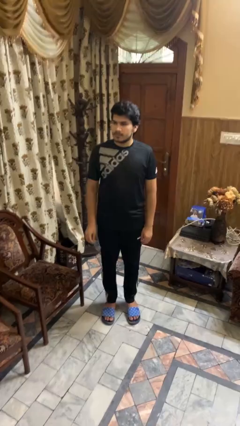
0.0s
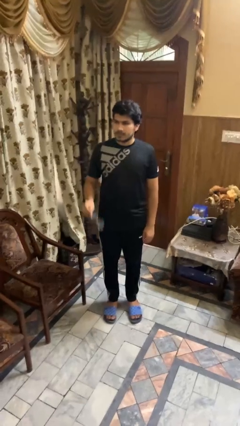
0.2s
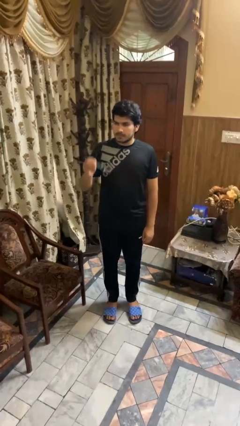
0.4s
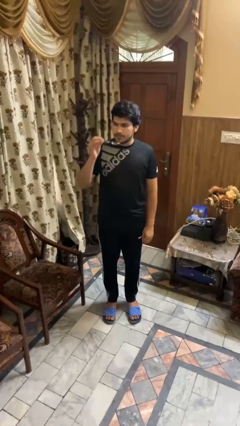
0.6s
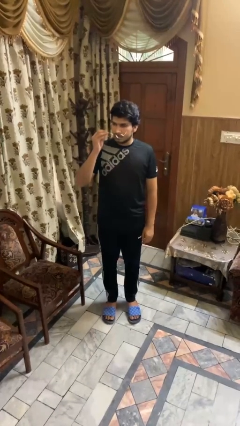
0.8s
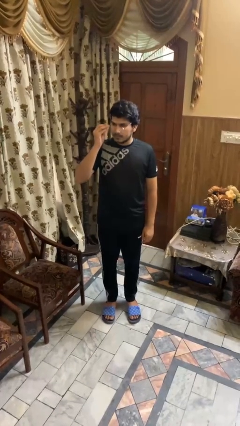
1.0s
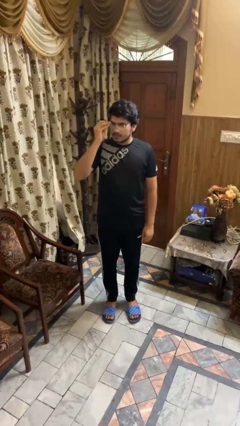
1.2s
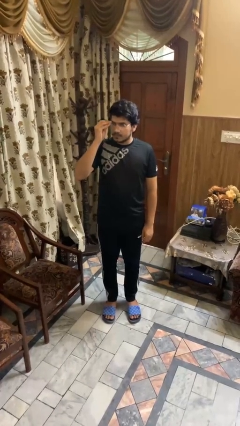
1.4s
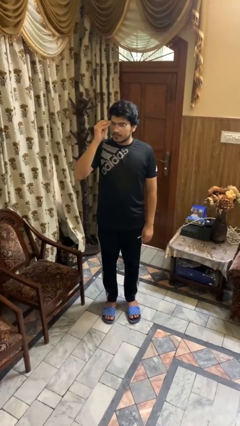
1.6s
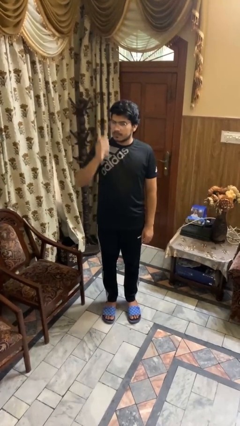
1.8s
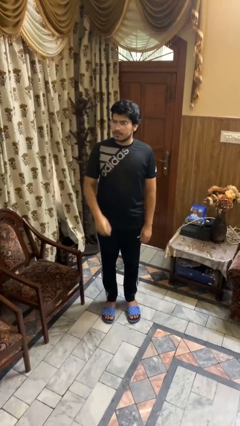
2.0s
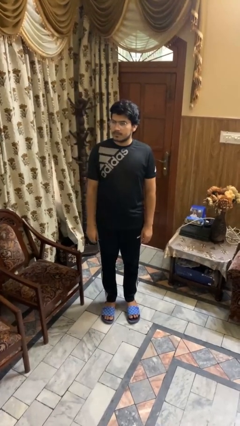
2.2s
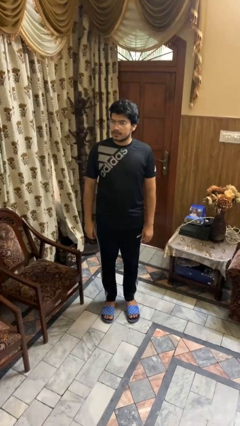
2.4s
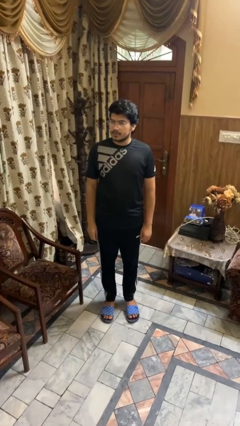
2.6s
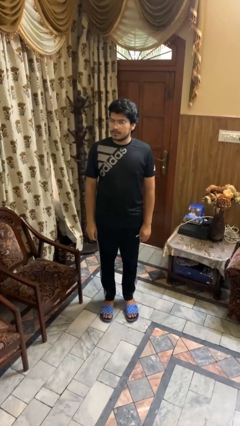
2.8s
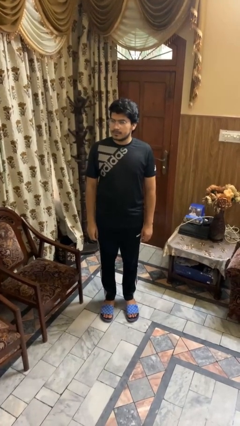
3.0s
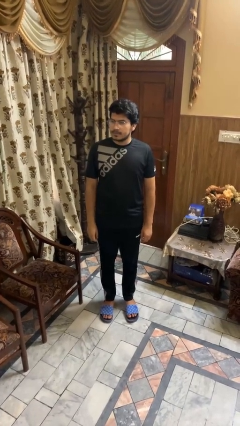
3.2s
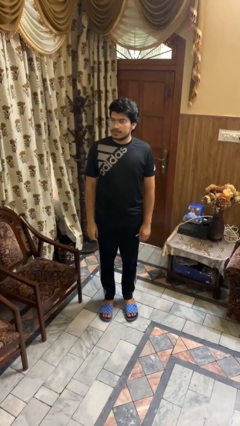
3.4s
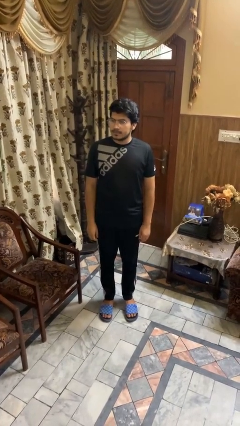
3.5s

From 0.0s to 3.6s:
person puts on glasses

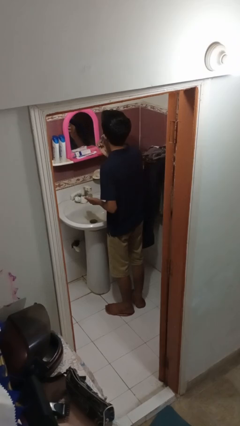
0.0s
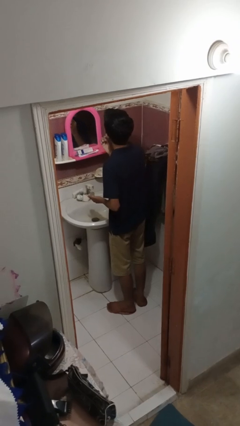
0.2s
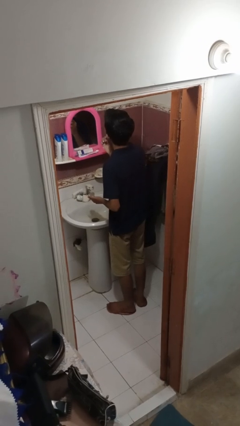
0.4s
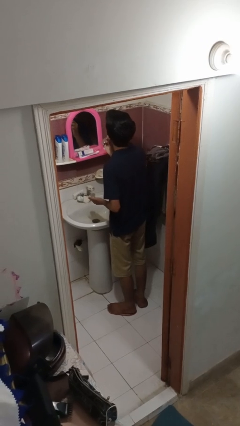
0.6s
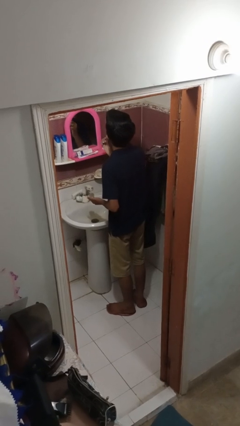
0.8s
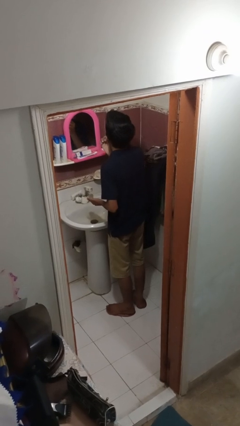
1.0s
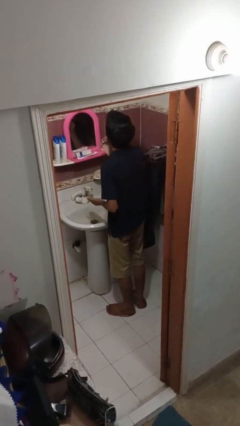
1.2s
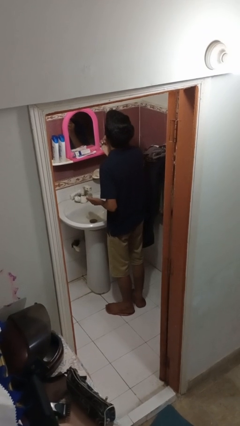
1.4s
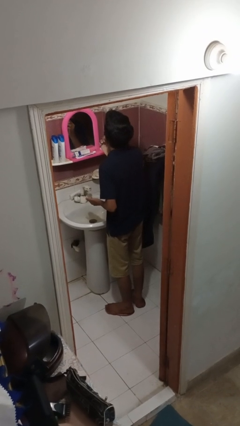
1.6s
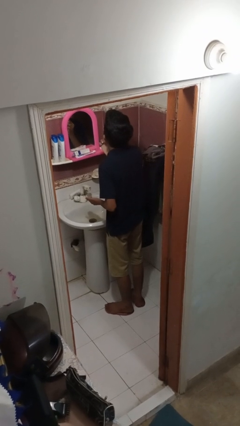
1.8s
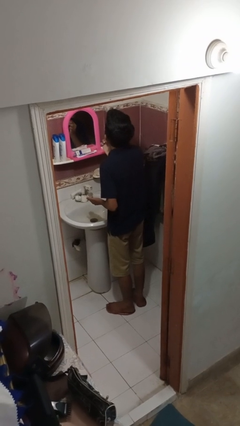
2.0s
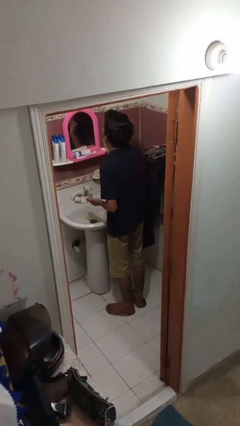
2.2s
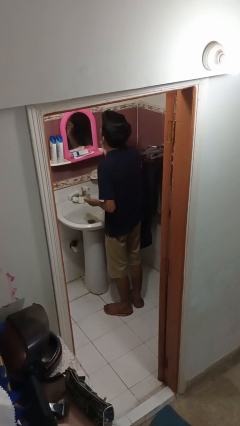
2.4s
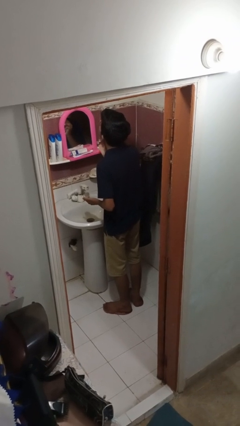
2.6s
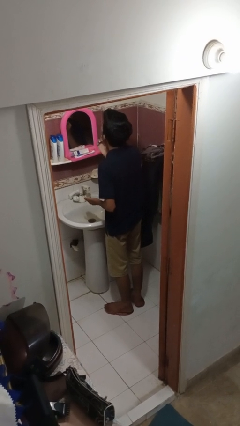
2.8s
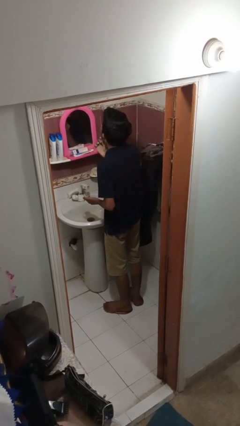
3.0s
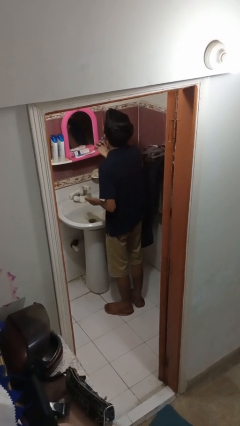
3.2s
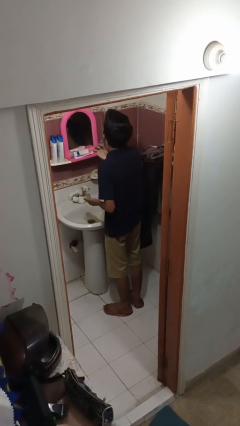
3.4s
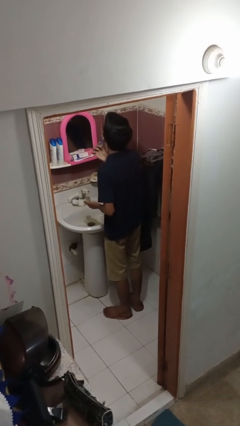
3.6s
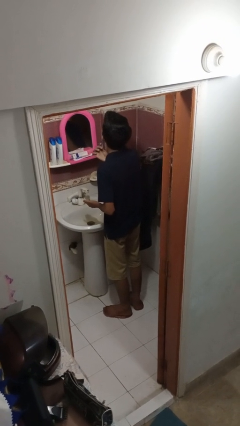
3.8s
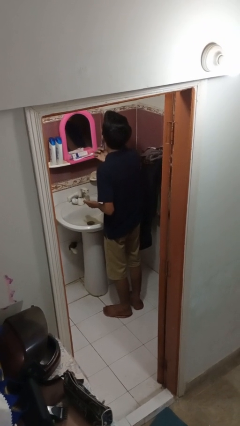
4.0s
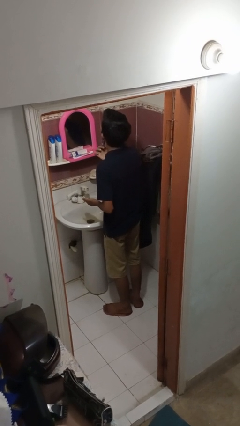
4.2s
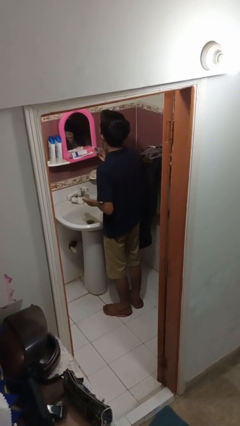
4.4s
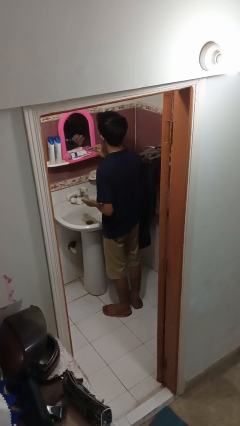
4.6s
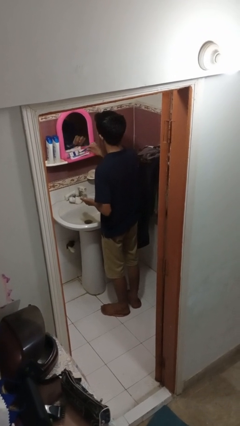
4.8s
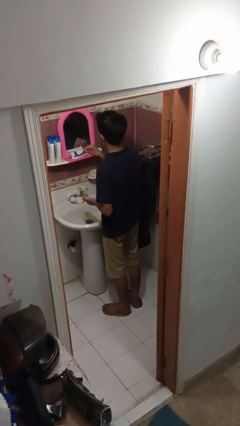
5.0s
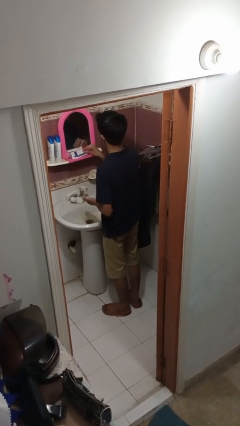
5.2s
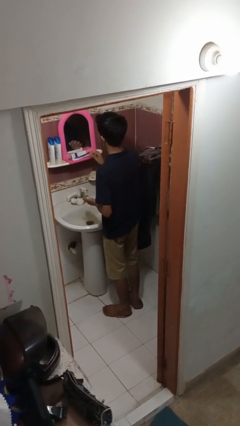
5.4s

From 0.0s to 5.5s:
person shaves face

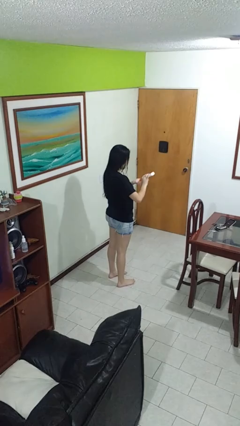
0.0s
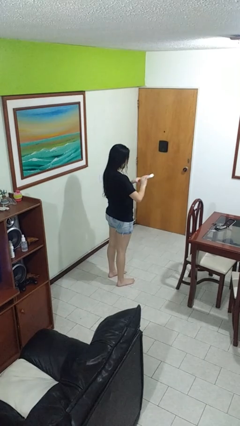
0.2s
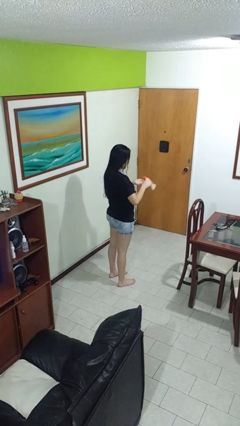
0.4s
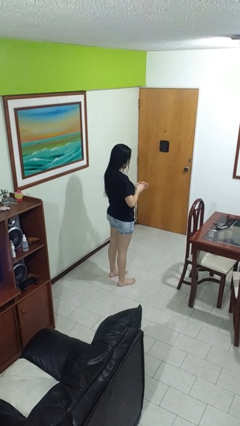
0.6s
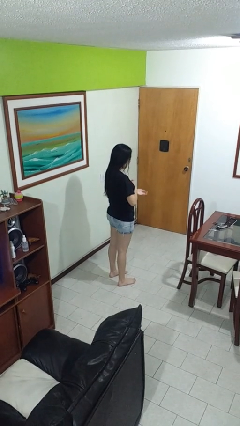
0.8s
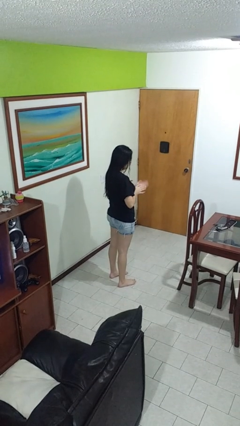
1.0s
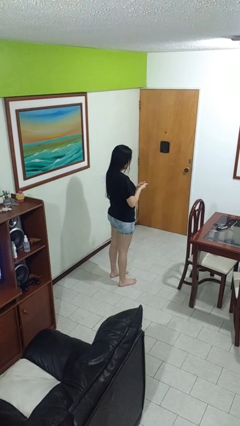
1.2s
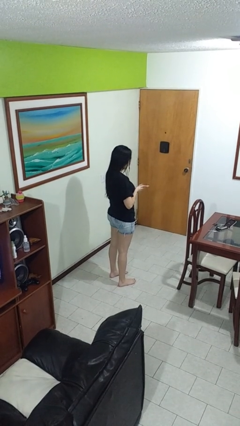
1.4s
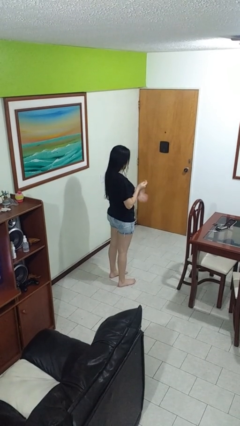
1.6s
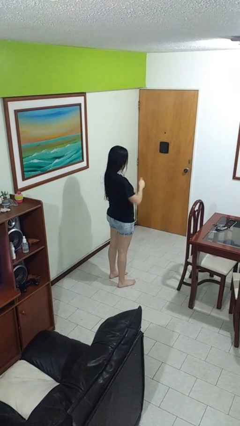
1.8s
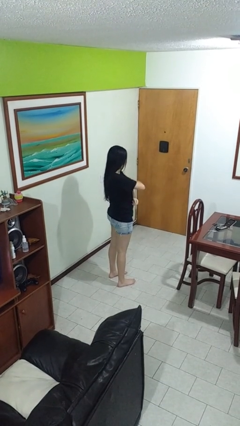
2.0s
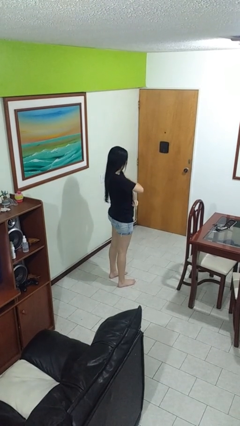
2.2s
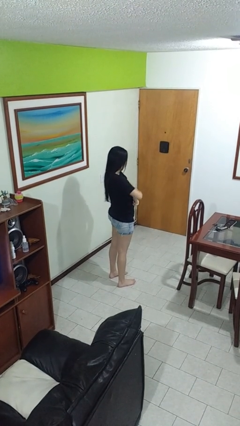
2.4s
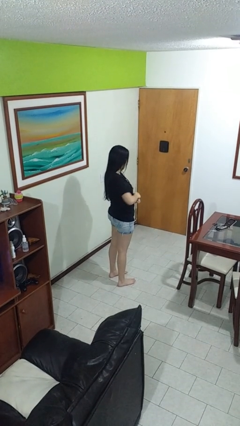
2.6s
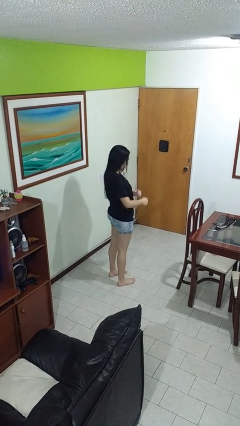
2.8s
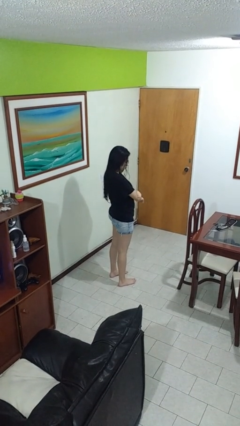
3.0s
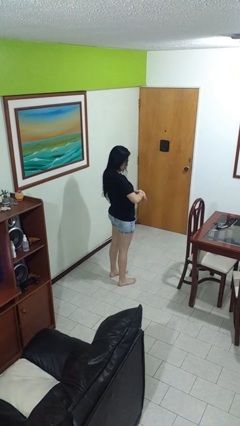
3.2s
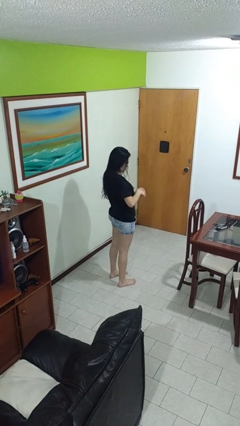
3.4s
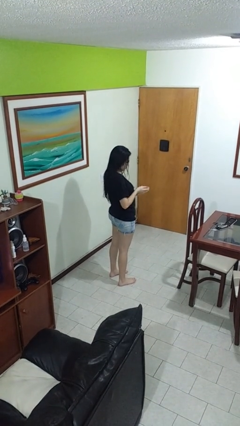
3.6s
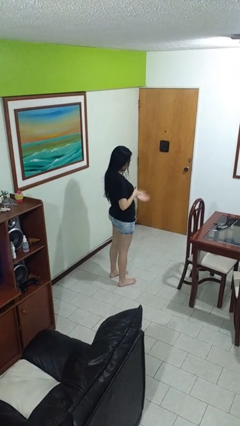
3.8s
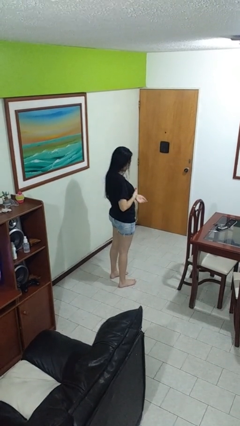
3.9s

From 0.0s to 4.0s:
person applies sunscreen

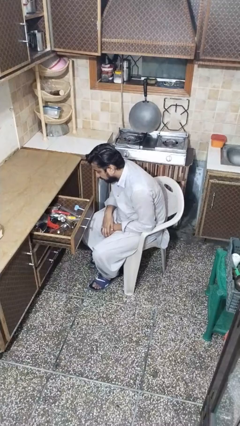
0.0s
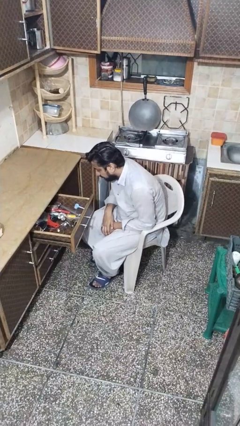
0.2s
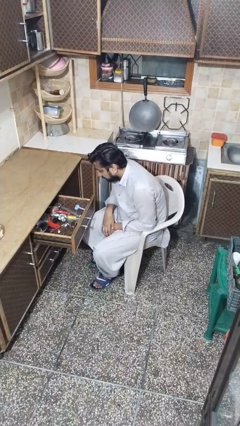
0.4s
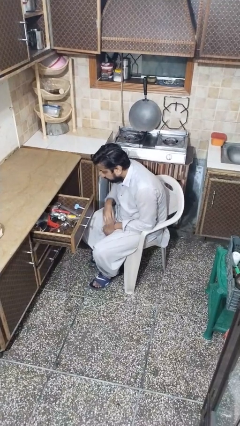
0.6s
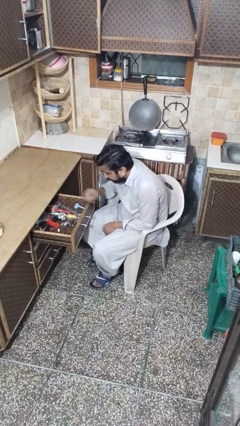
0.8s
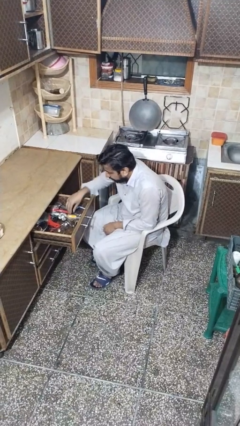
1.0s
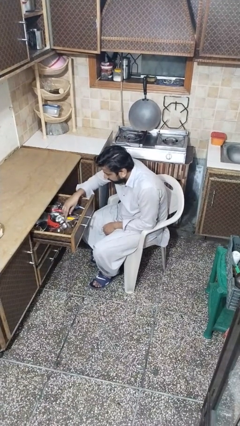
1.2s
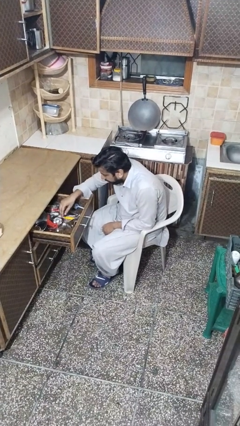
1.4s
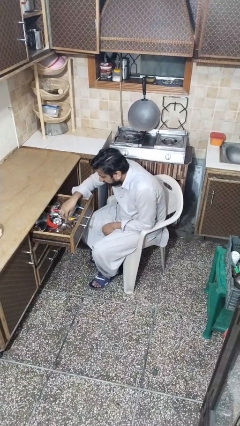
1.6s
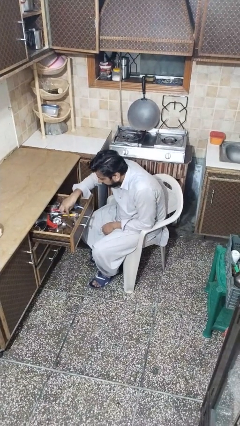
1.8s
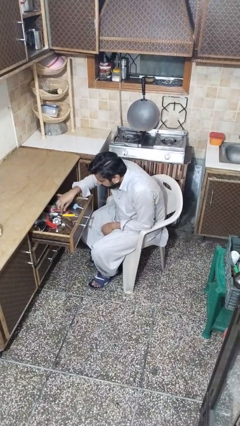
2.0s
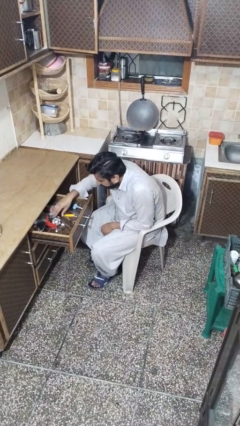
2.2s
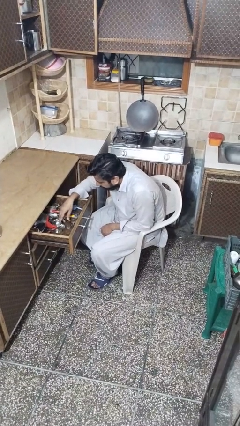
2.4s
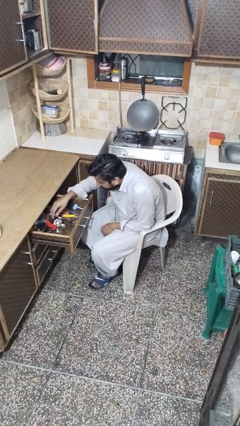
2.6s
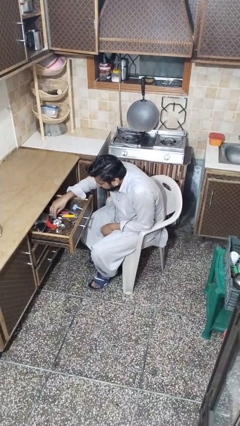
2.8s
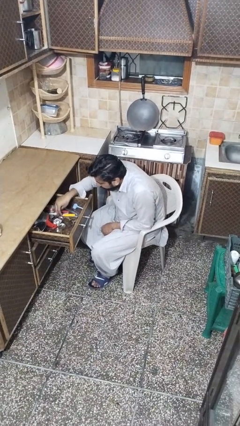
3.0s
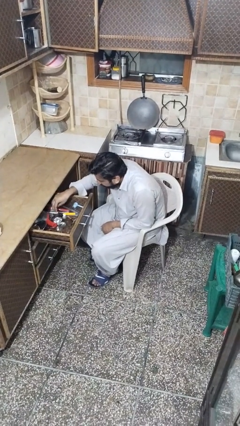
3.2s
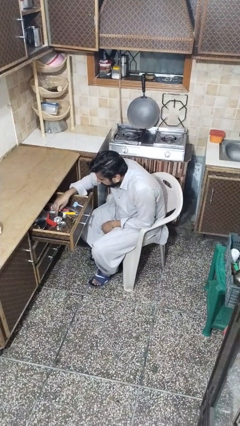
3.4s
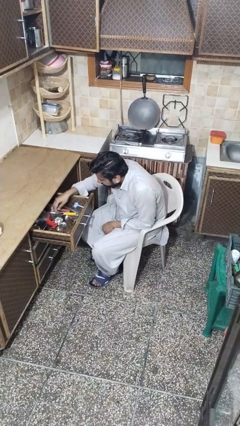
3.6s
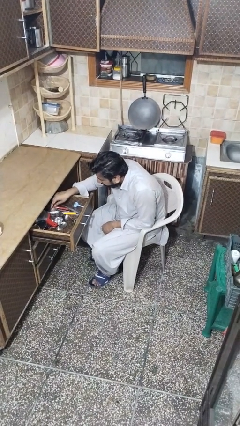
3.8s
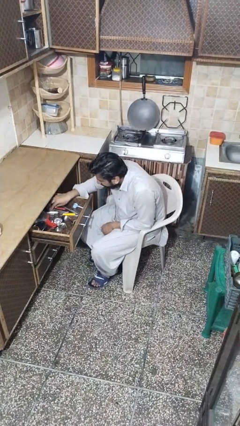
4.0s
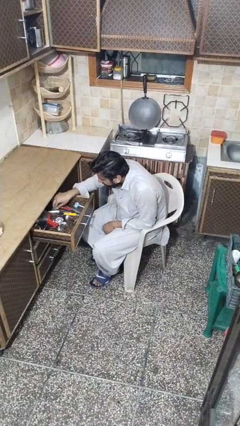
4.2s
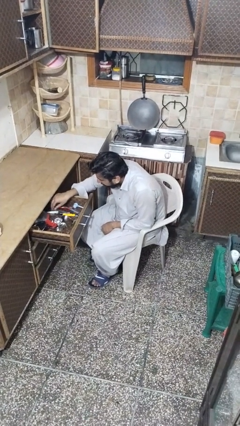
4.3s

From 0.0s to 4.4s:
person searches in kitchen drawer

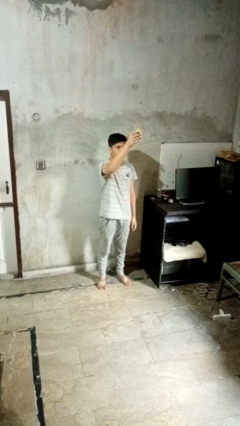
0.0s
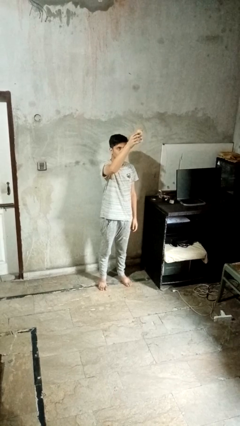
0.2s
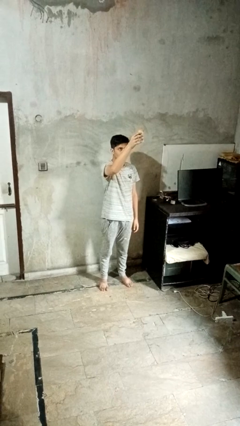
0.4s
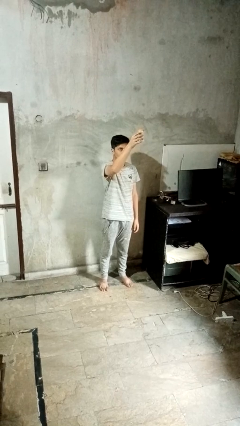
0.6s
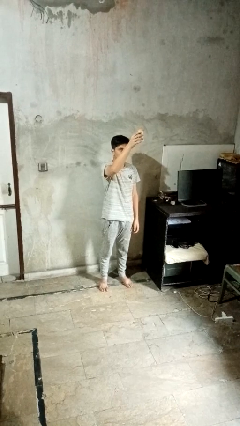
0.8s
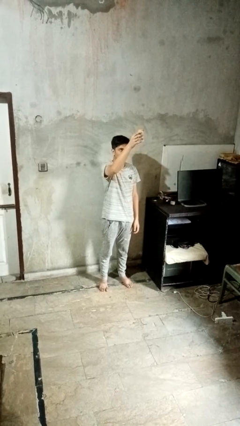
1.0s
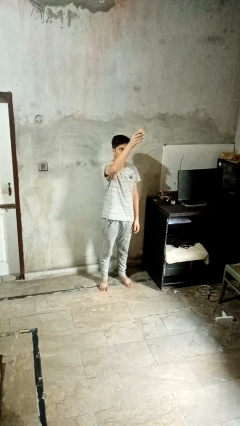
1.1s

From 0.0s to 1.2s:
person drops object
